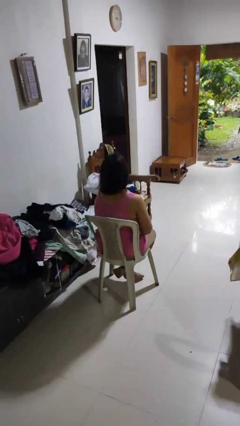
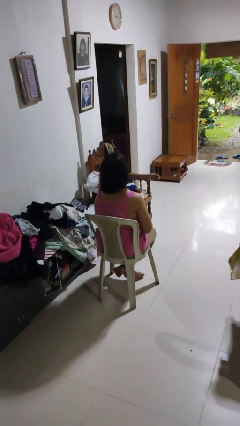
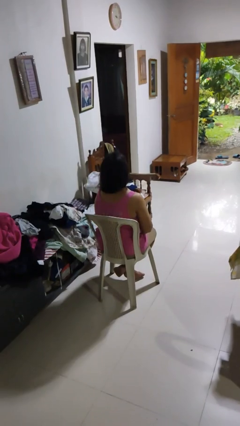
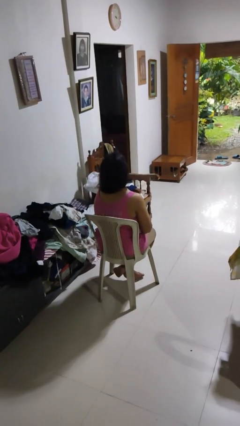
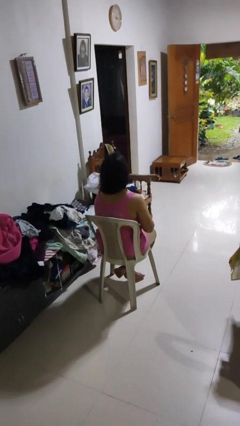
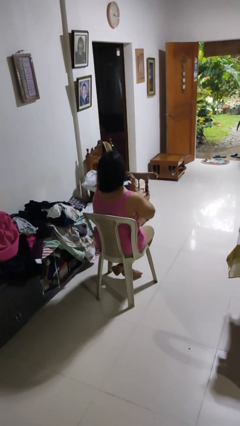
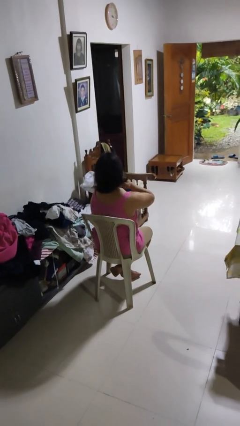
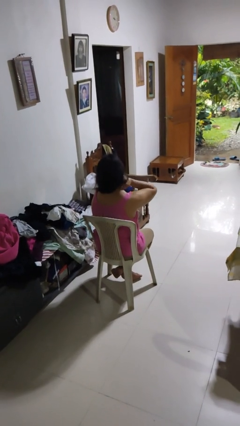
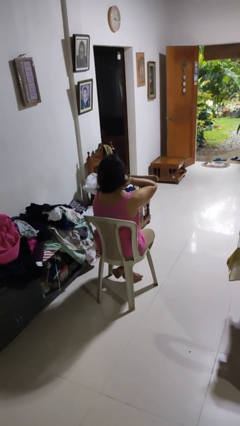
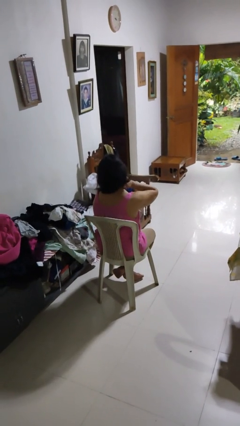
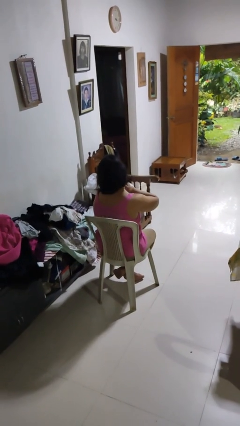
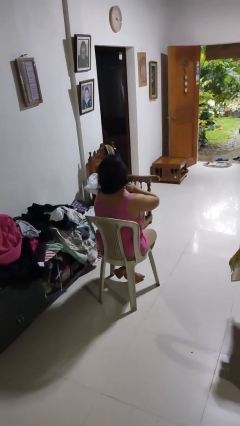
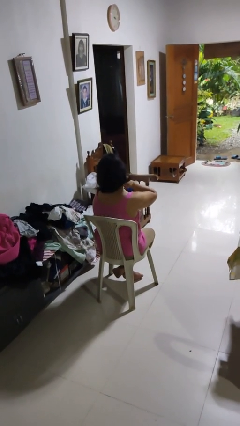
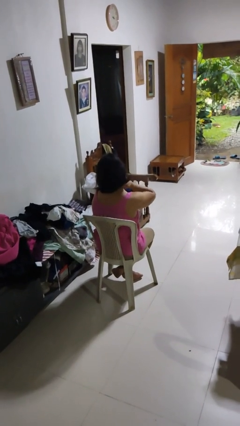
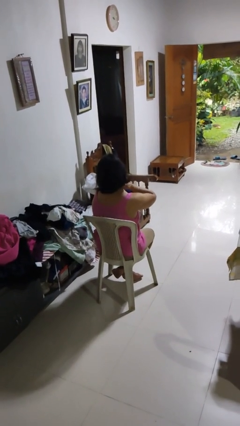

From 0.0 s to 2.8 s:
person rubs neck

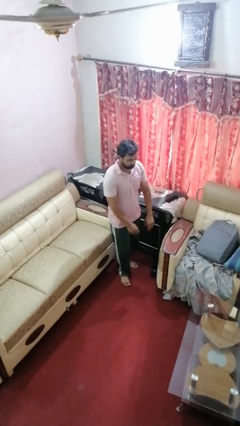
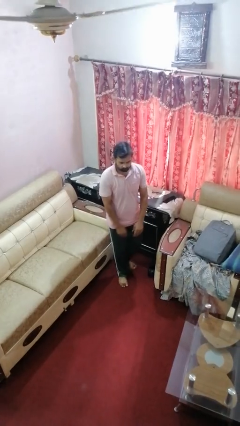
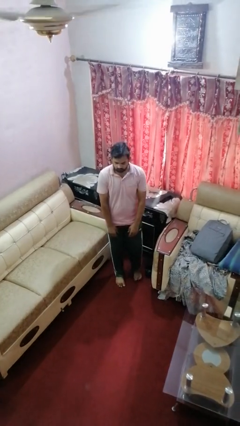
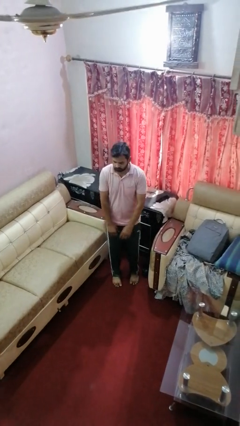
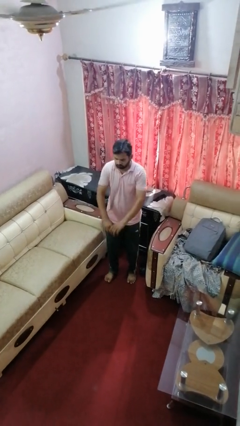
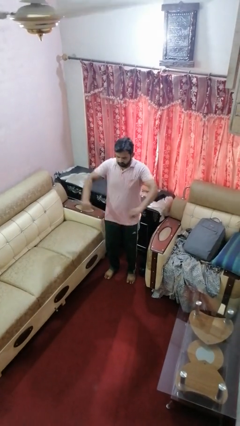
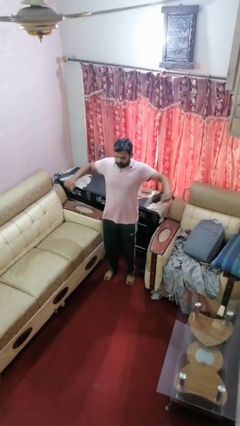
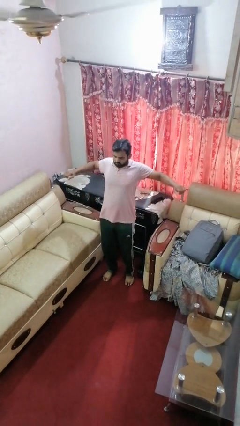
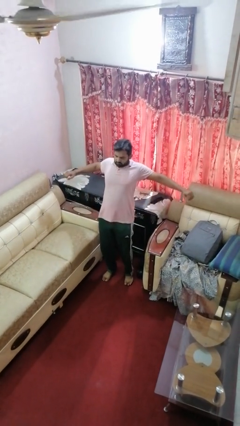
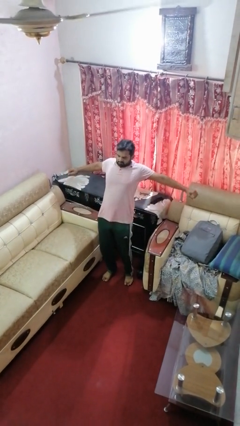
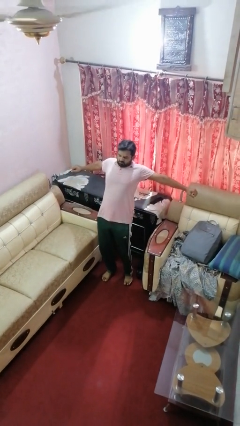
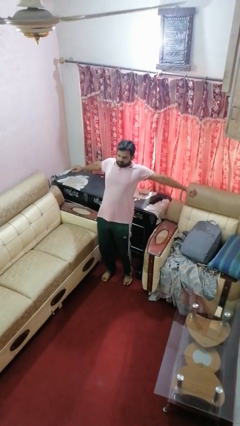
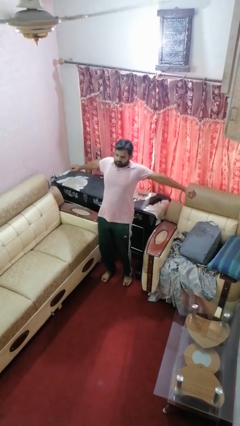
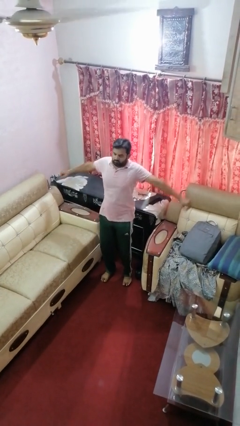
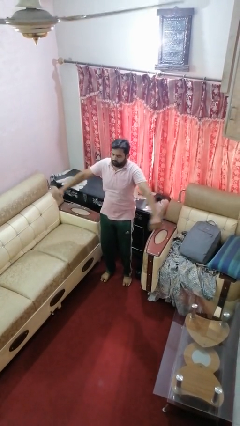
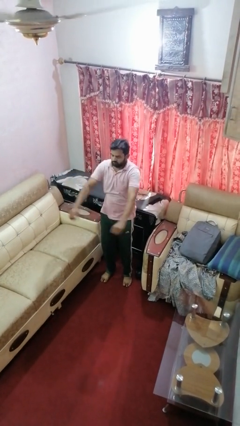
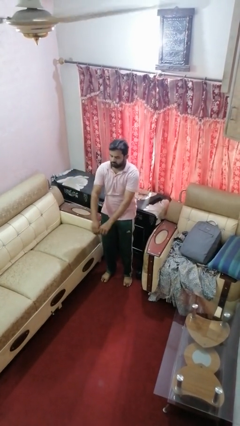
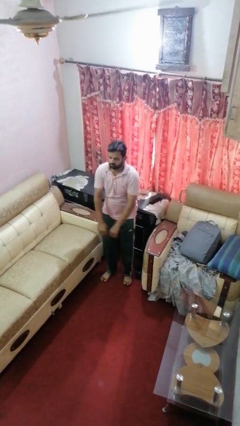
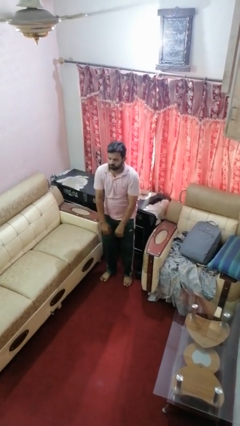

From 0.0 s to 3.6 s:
person stretches arms to side

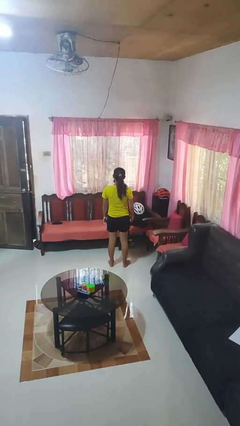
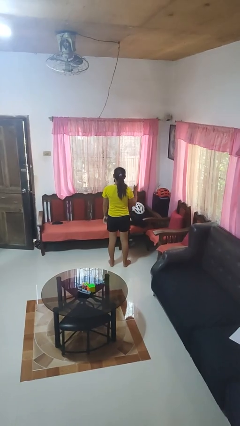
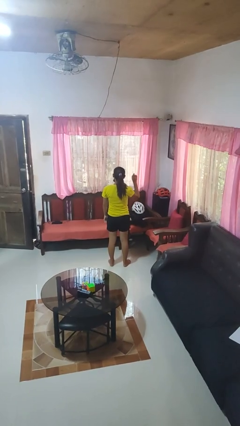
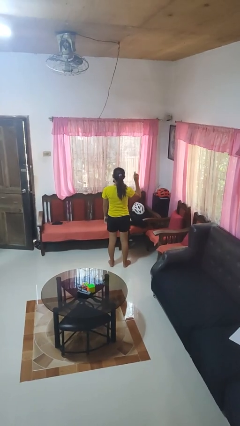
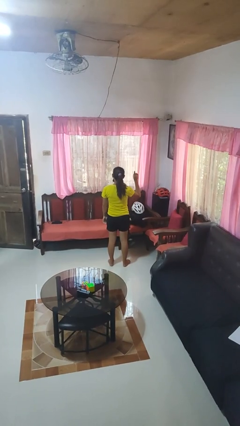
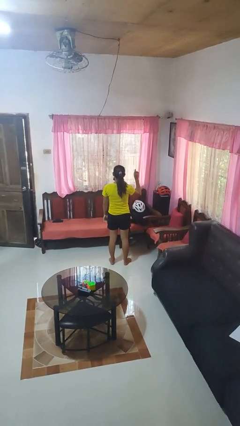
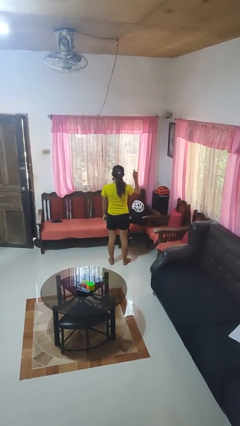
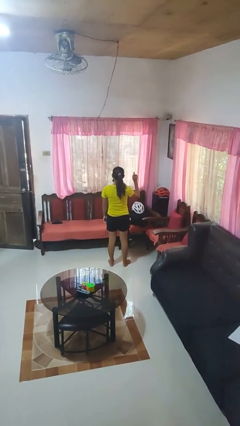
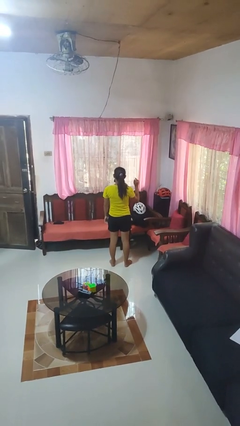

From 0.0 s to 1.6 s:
person gestures number one

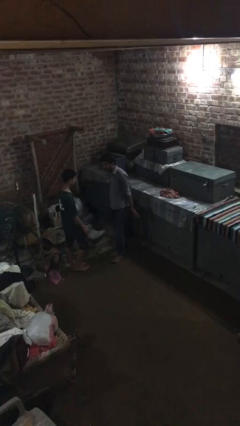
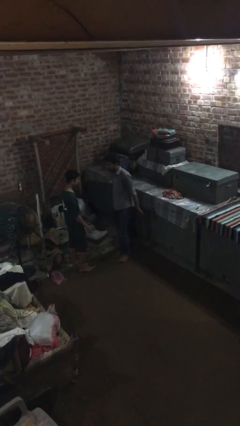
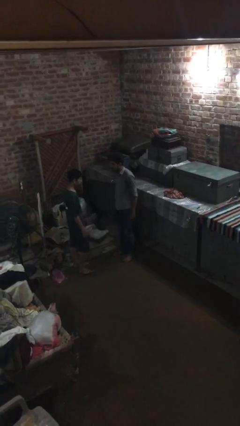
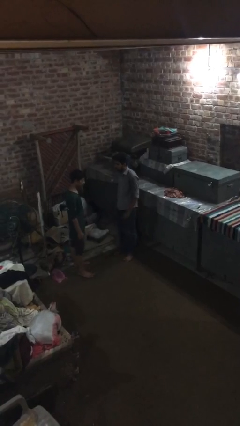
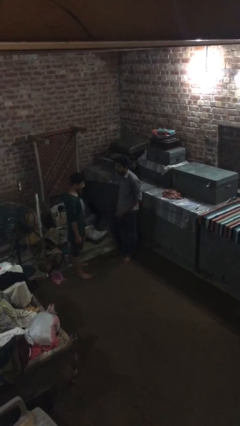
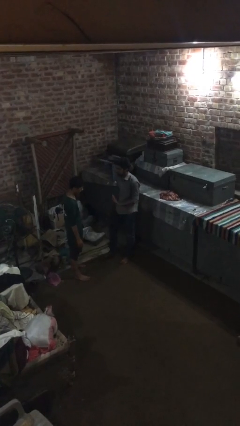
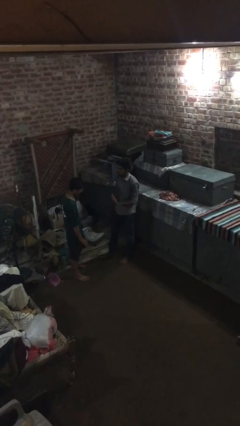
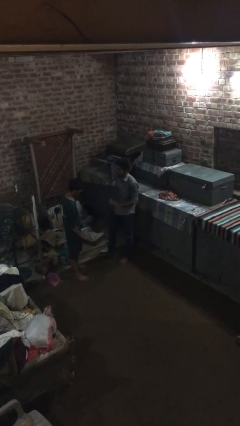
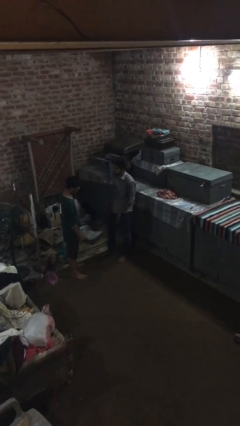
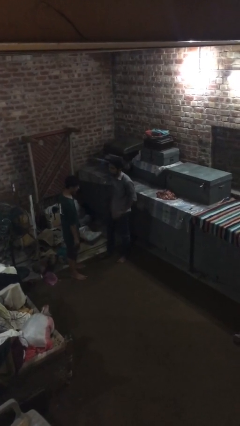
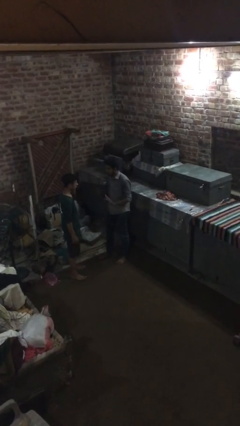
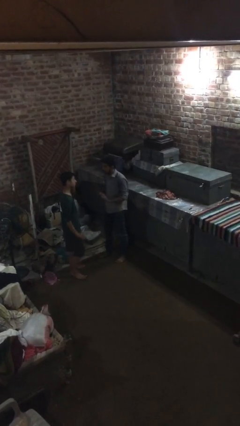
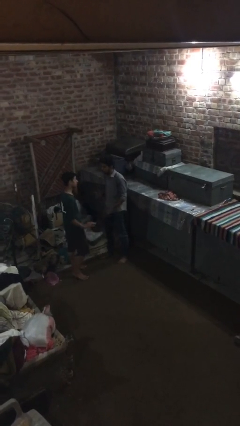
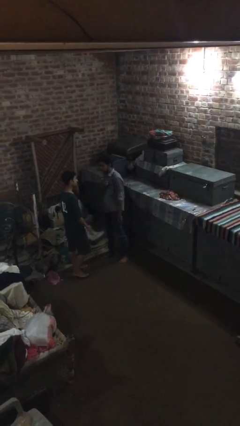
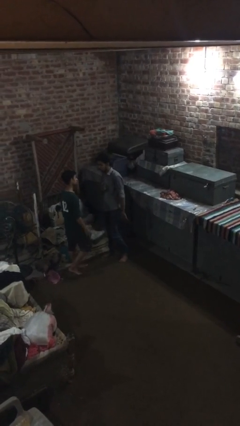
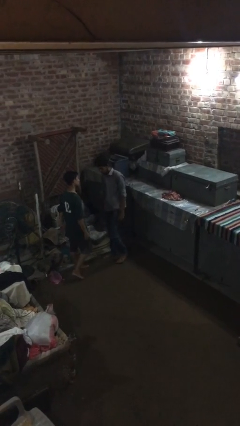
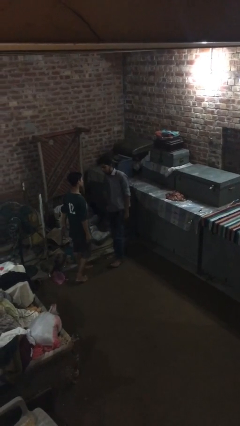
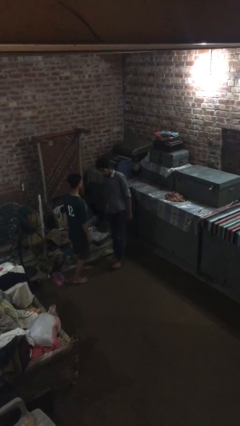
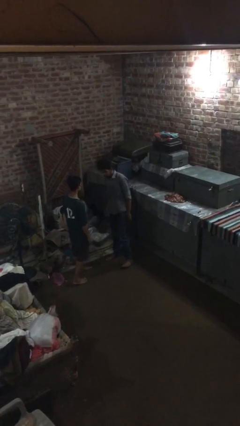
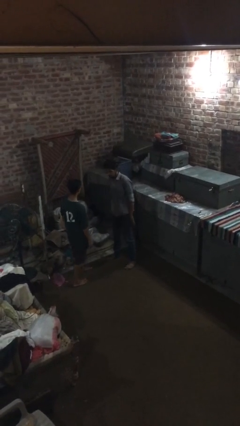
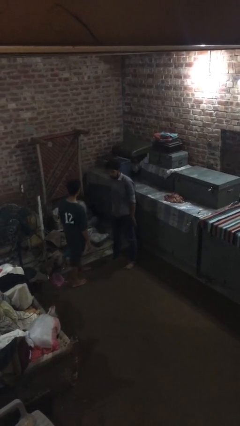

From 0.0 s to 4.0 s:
person talks to person

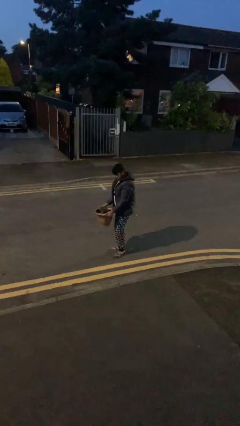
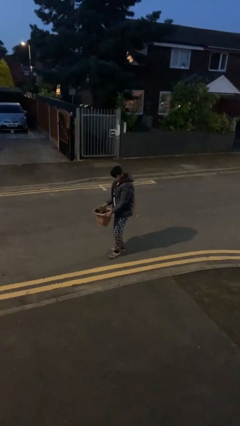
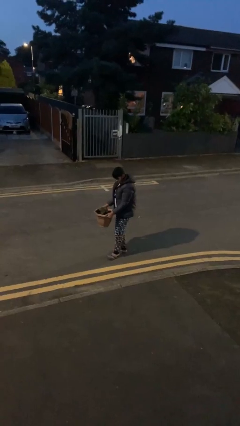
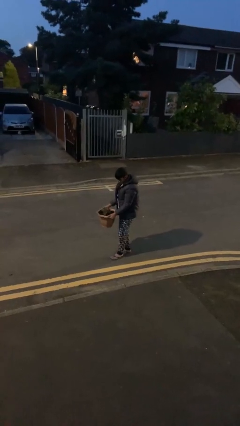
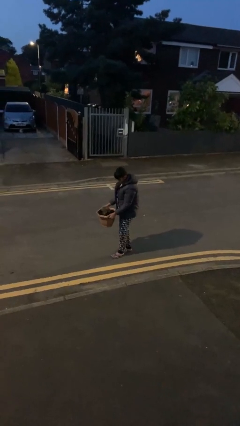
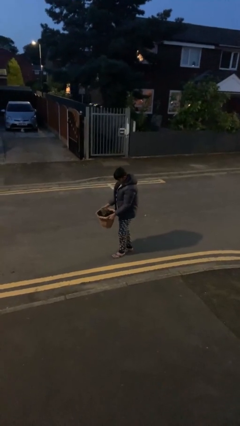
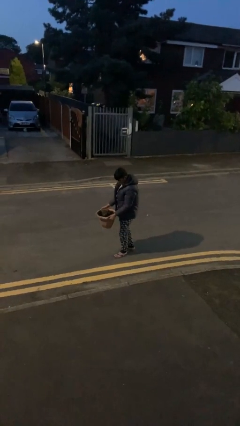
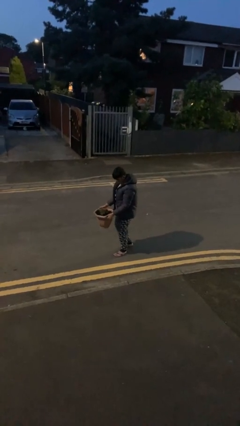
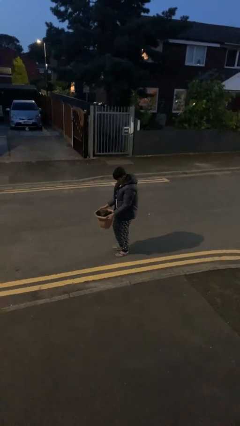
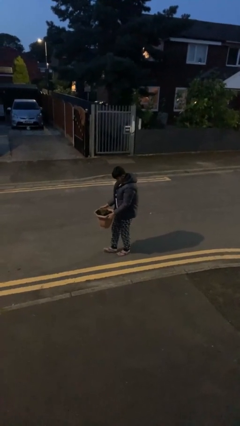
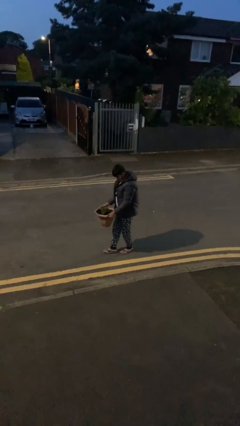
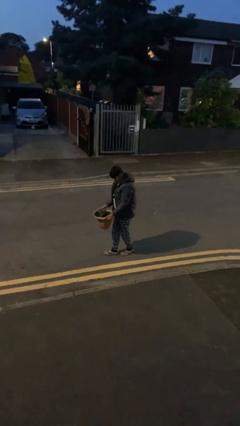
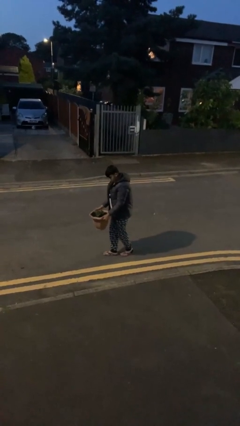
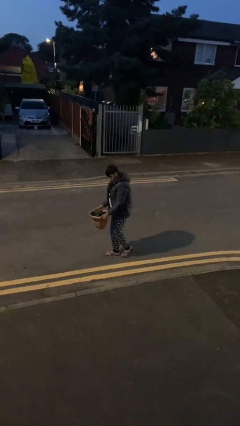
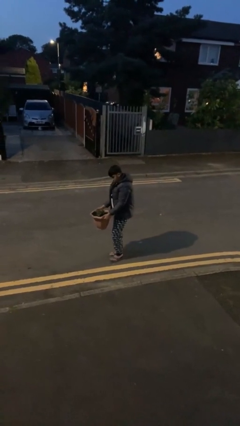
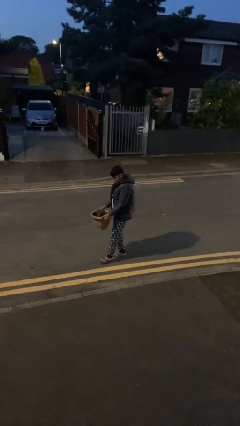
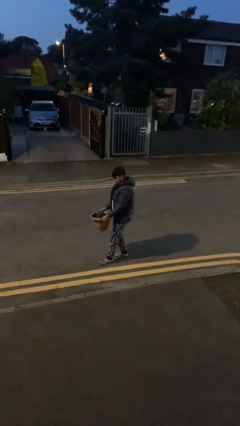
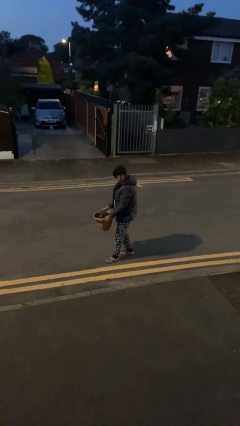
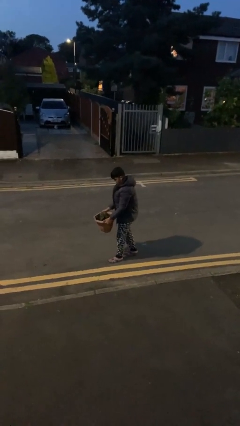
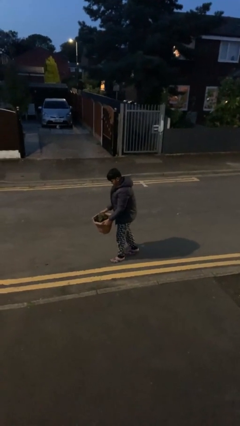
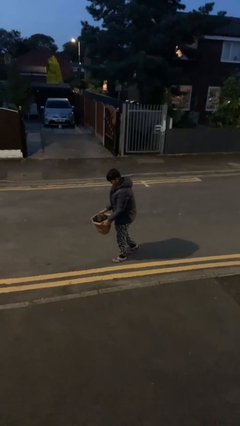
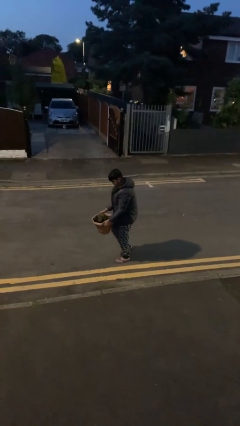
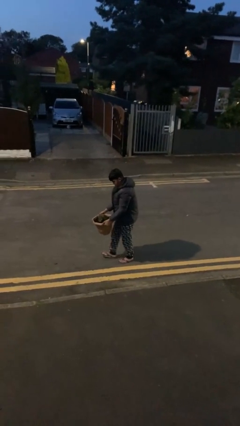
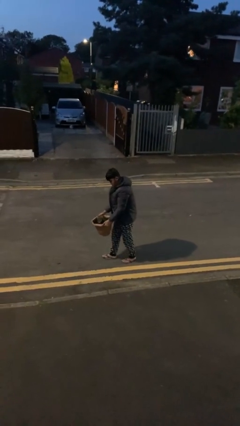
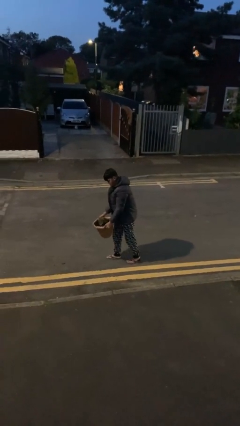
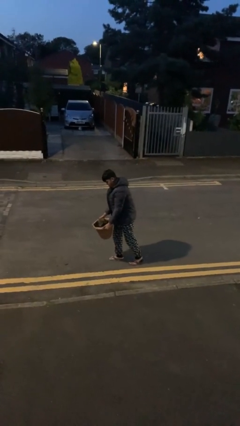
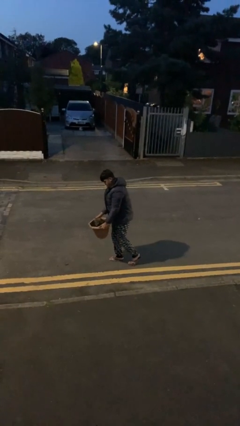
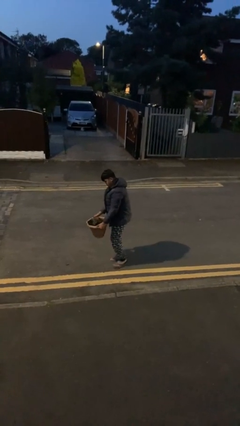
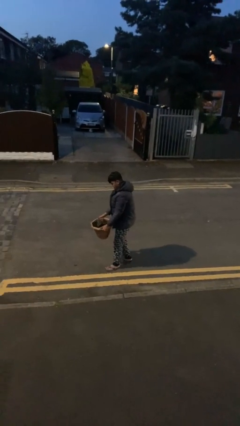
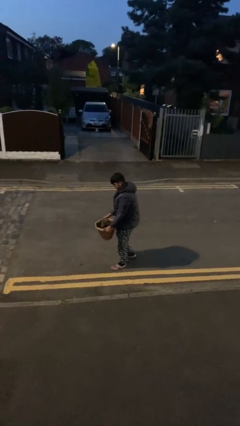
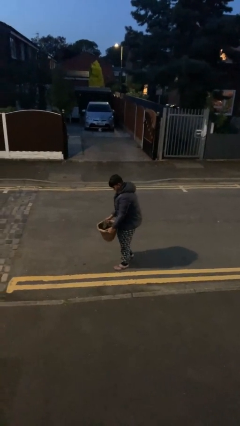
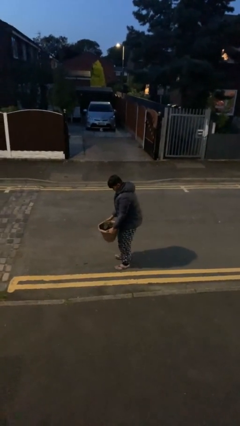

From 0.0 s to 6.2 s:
person carries heavy object
